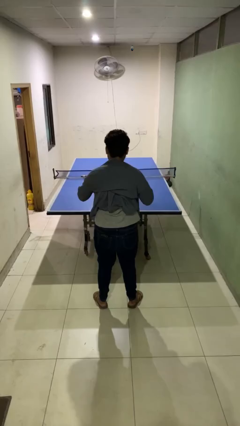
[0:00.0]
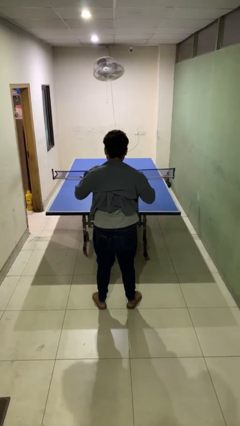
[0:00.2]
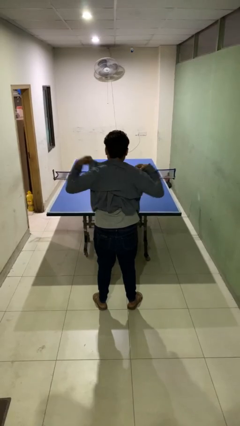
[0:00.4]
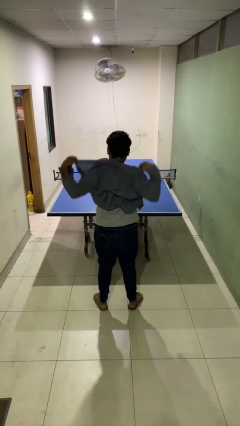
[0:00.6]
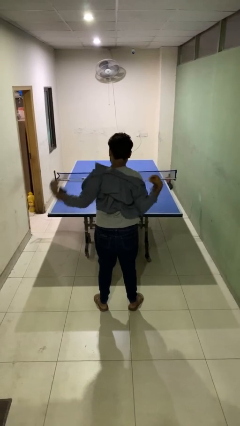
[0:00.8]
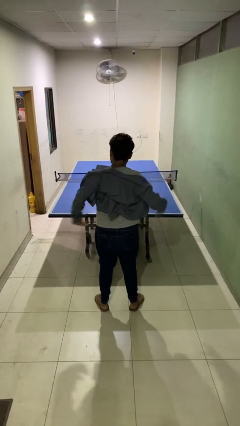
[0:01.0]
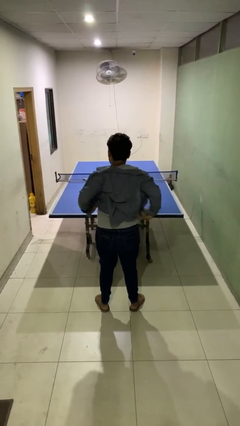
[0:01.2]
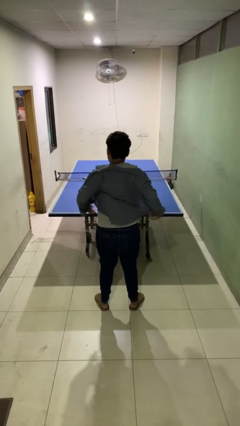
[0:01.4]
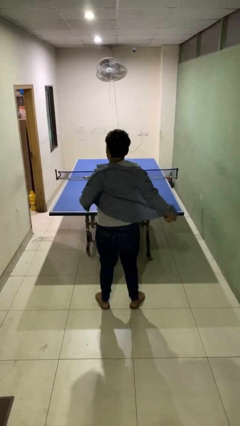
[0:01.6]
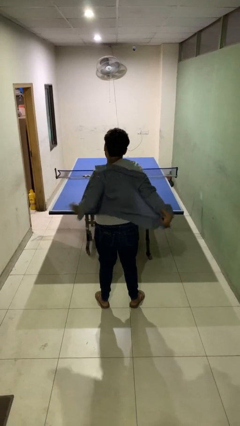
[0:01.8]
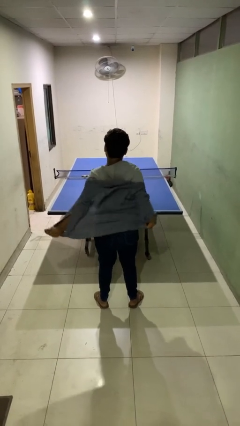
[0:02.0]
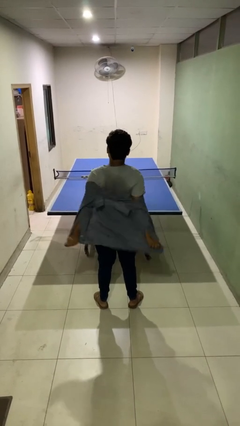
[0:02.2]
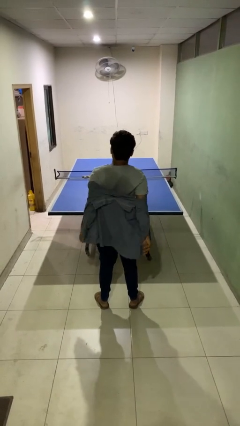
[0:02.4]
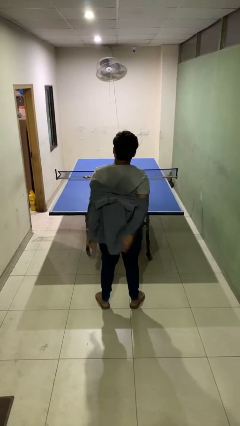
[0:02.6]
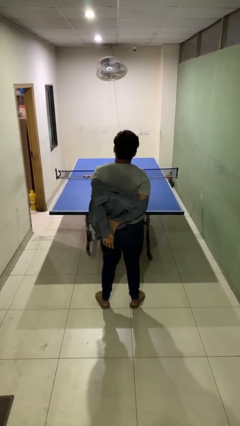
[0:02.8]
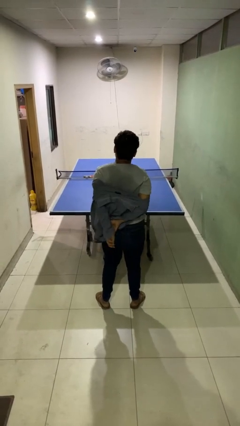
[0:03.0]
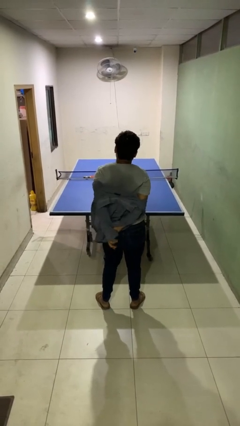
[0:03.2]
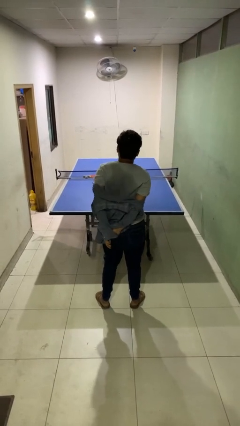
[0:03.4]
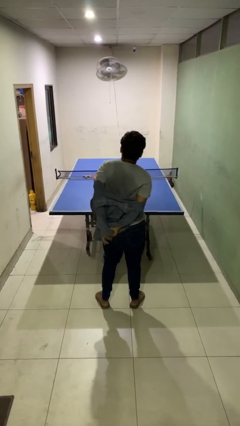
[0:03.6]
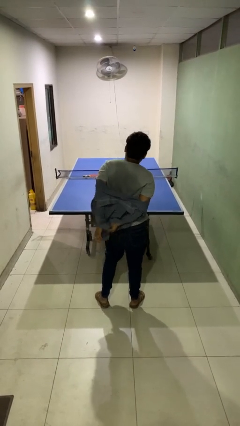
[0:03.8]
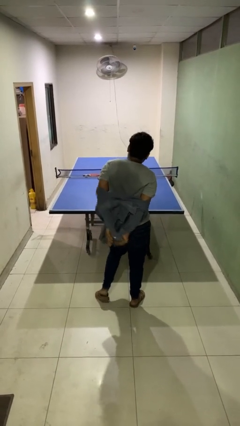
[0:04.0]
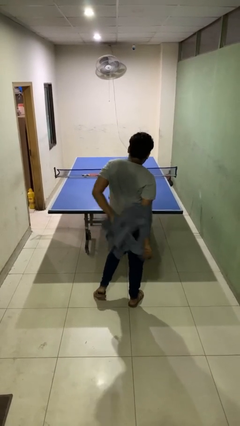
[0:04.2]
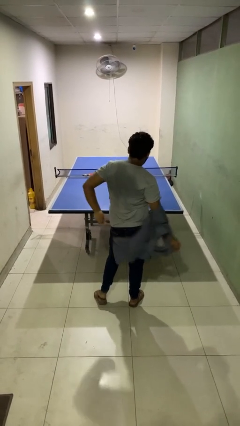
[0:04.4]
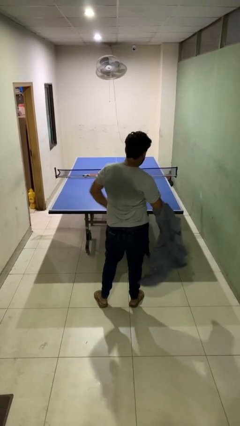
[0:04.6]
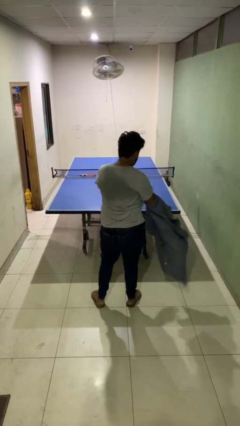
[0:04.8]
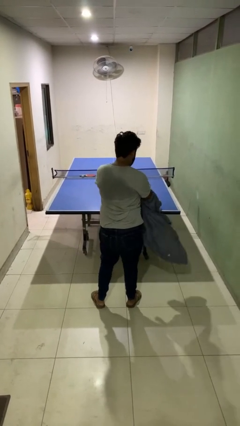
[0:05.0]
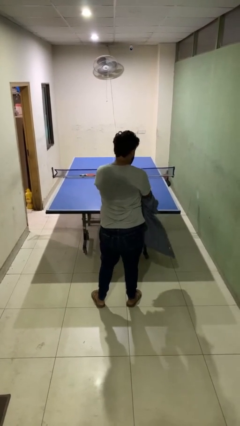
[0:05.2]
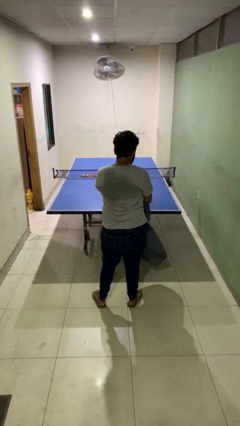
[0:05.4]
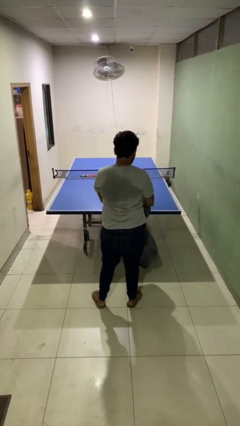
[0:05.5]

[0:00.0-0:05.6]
person takes off shirt

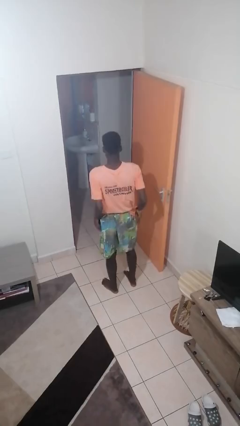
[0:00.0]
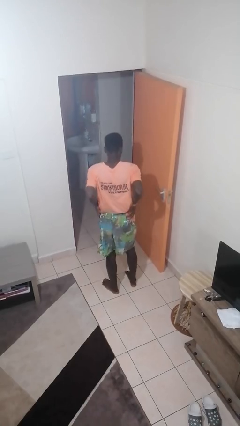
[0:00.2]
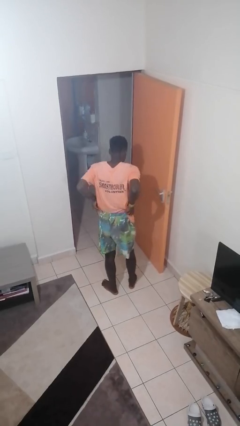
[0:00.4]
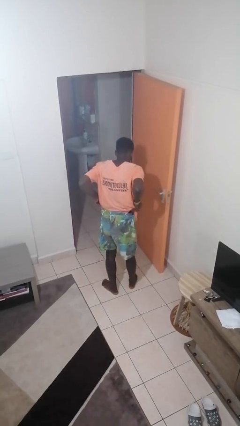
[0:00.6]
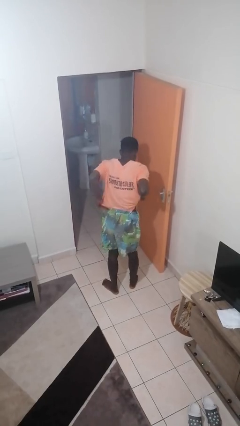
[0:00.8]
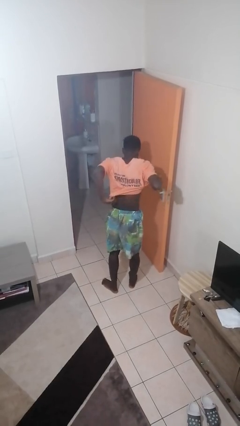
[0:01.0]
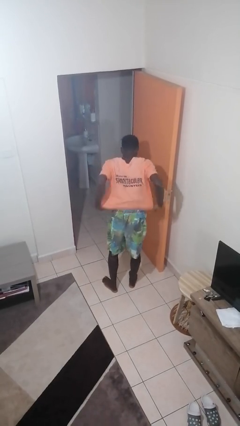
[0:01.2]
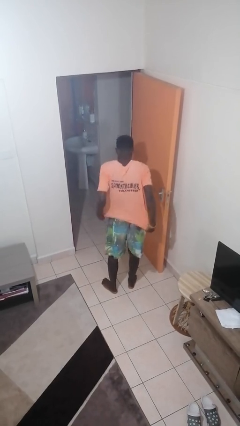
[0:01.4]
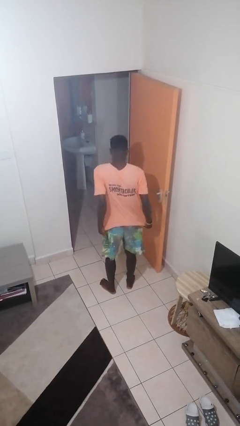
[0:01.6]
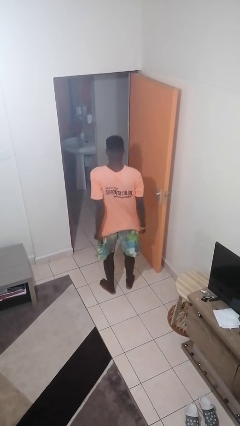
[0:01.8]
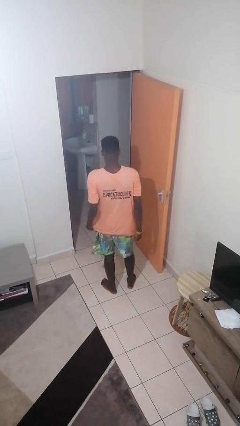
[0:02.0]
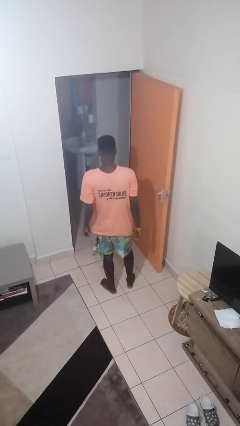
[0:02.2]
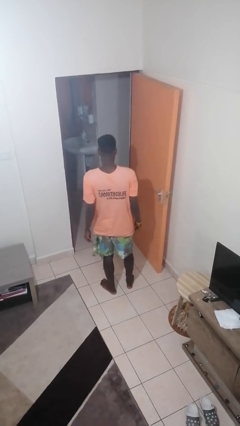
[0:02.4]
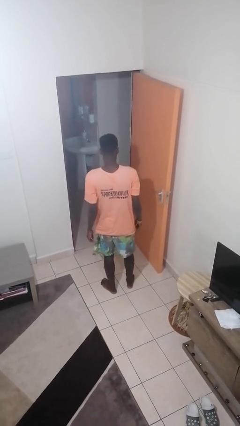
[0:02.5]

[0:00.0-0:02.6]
person untucks shirt

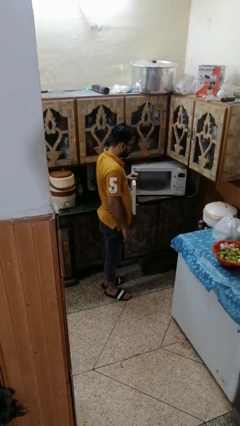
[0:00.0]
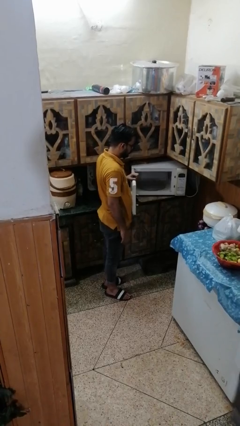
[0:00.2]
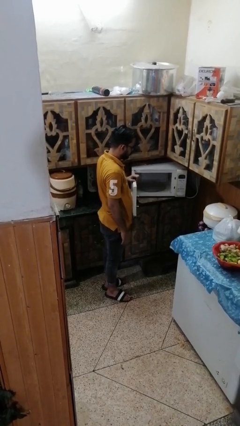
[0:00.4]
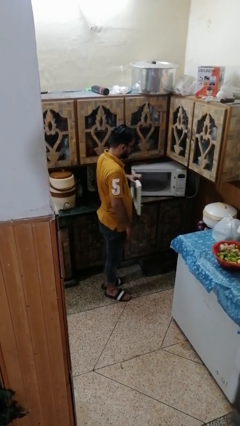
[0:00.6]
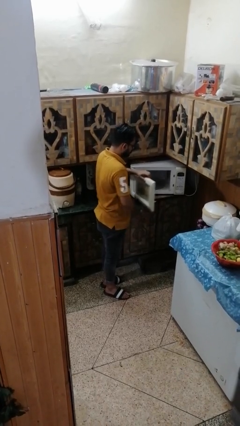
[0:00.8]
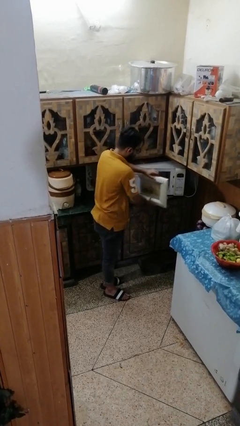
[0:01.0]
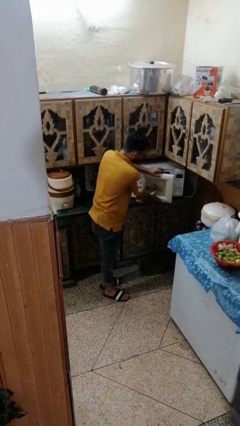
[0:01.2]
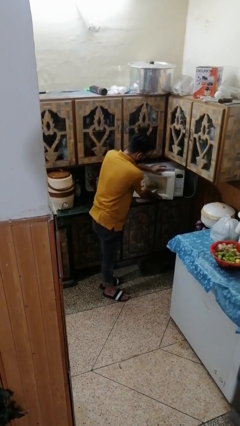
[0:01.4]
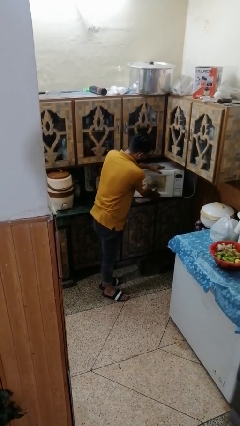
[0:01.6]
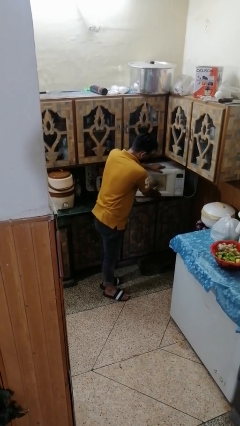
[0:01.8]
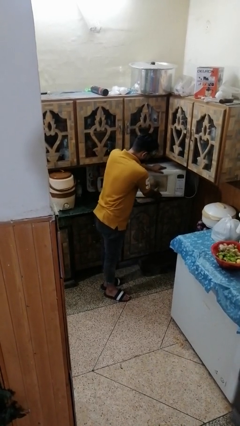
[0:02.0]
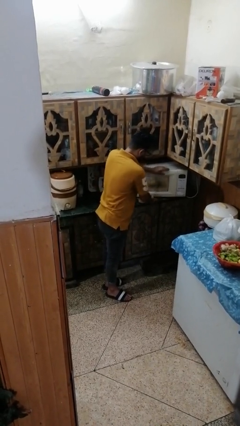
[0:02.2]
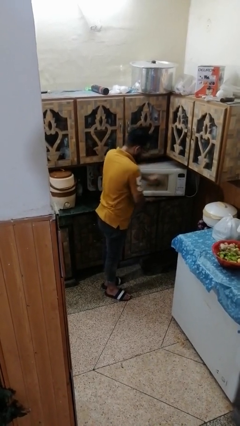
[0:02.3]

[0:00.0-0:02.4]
person closes microwave

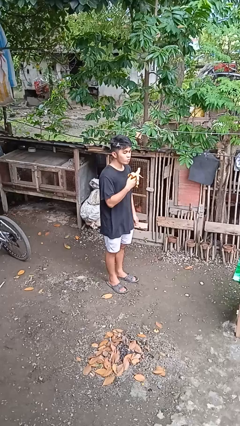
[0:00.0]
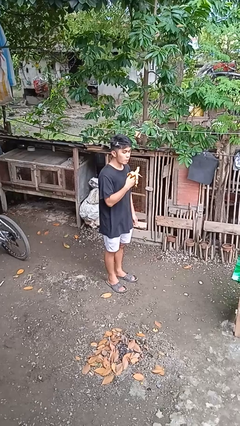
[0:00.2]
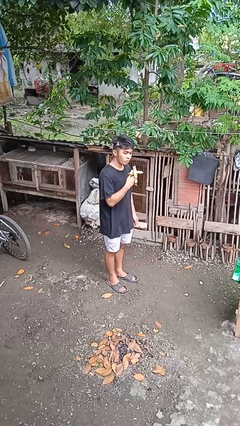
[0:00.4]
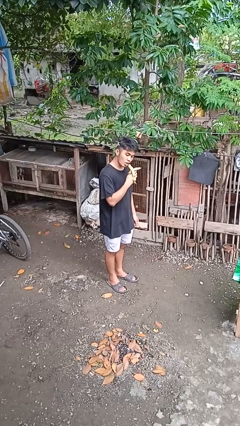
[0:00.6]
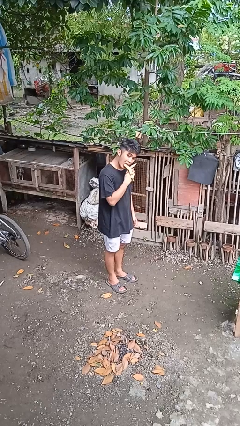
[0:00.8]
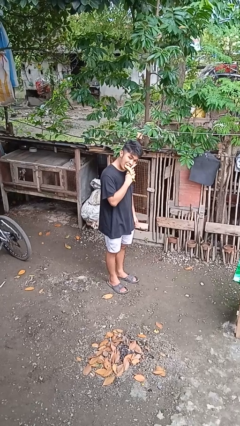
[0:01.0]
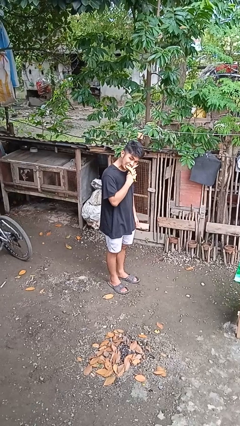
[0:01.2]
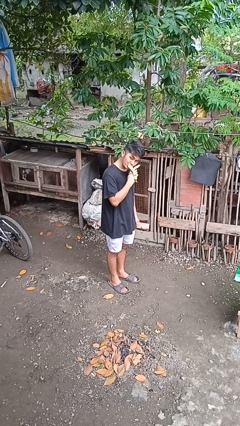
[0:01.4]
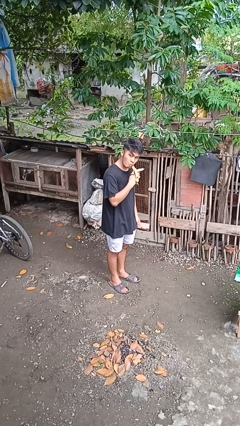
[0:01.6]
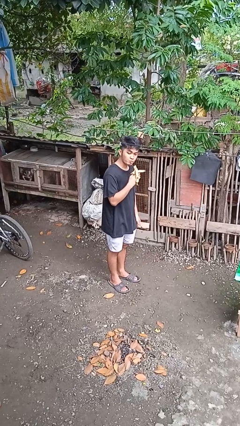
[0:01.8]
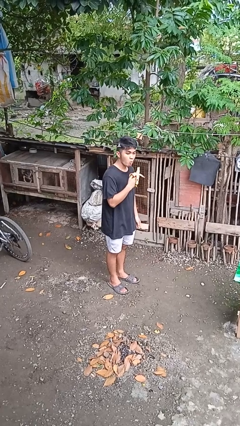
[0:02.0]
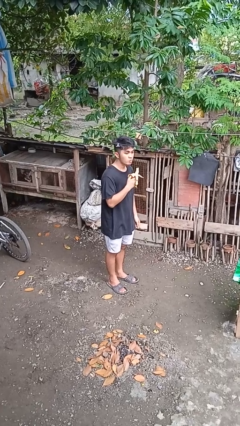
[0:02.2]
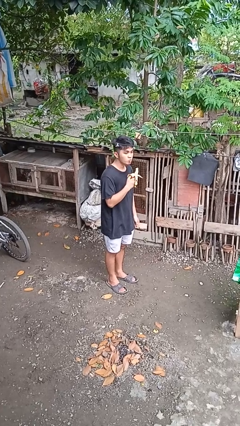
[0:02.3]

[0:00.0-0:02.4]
person eats banana

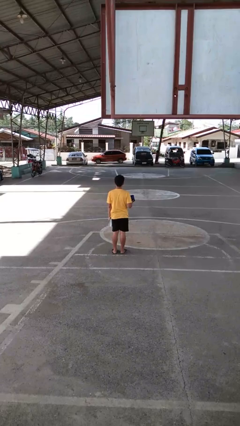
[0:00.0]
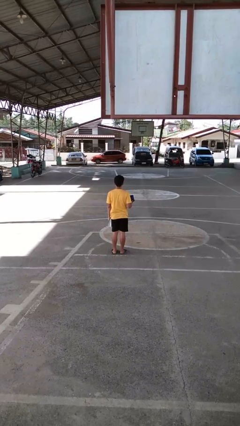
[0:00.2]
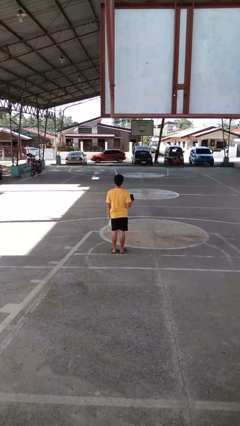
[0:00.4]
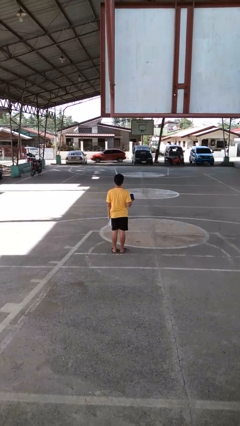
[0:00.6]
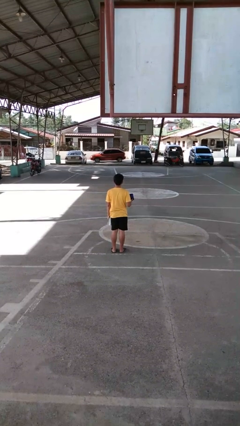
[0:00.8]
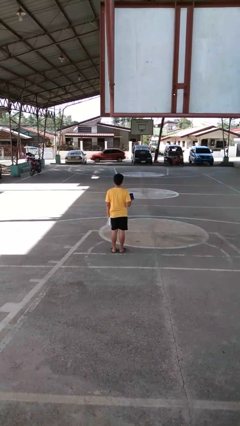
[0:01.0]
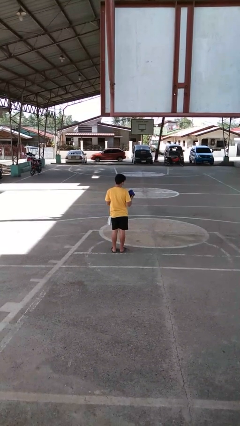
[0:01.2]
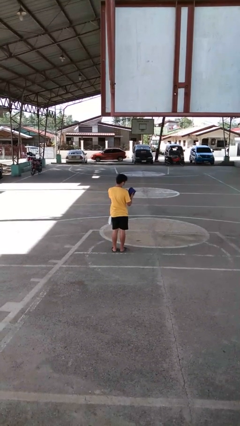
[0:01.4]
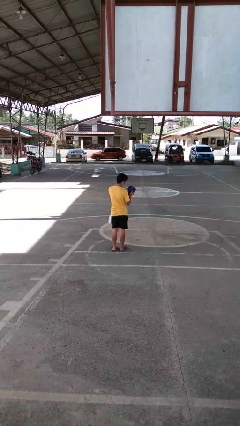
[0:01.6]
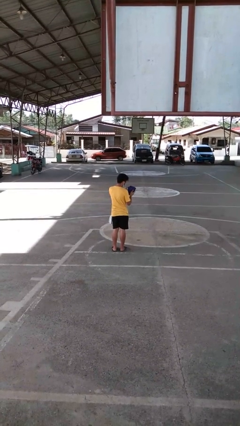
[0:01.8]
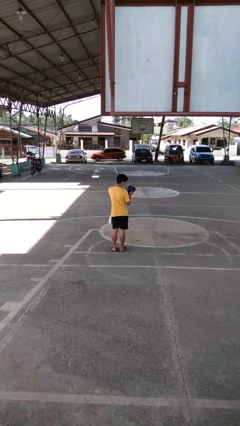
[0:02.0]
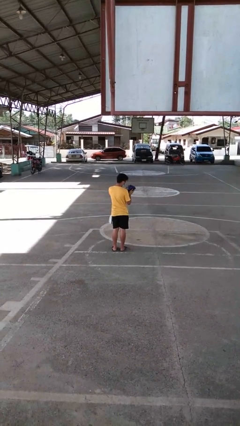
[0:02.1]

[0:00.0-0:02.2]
person puts on glasses

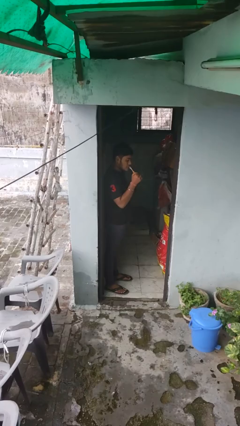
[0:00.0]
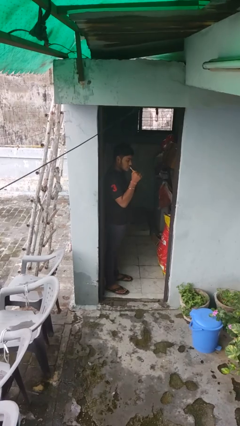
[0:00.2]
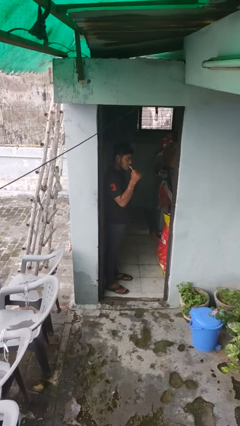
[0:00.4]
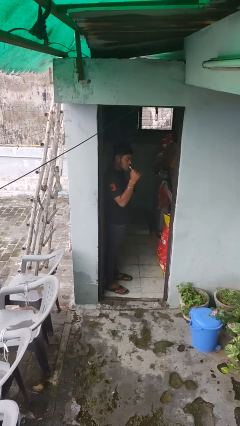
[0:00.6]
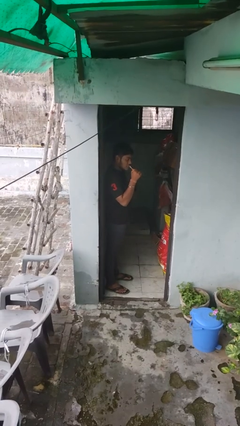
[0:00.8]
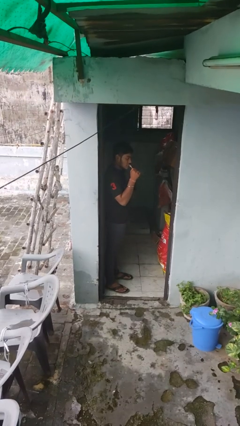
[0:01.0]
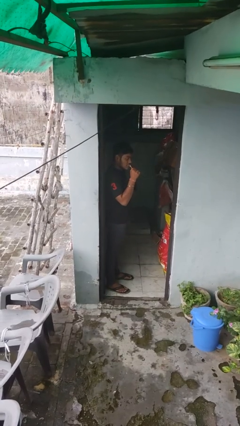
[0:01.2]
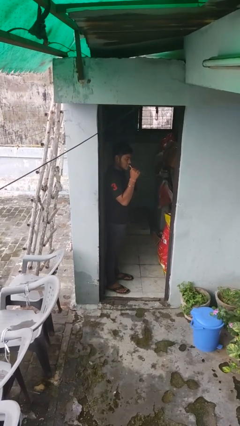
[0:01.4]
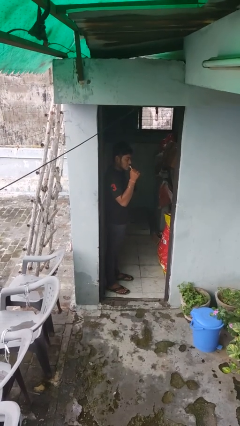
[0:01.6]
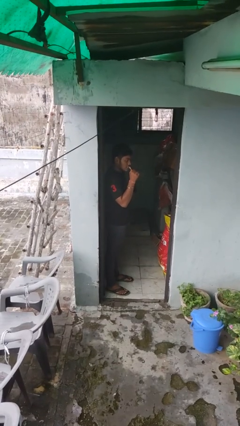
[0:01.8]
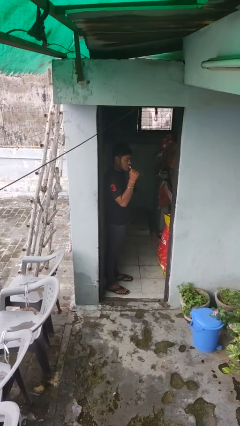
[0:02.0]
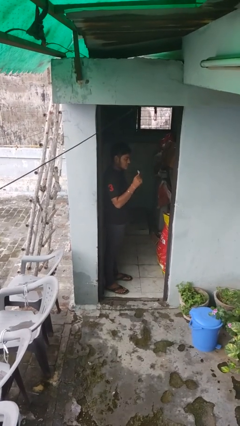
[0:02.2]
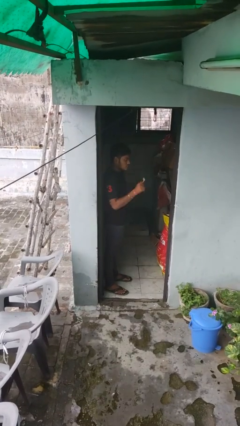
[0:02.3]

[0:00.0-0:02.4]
person brushes teeth
